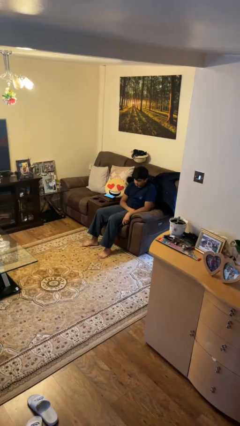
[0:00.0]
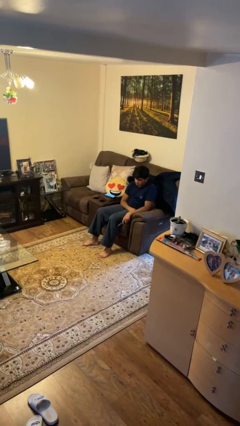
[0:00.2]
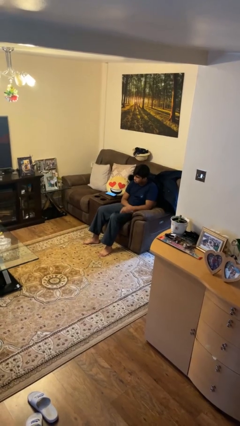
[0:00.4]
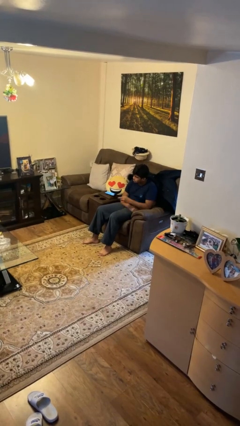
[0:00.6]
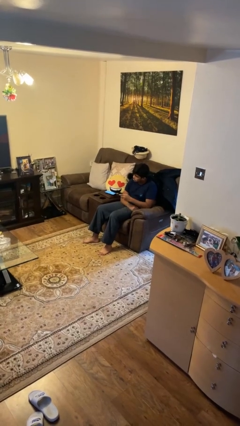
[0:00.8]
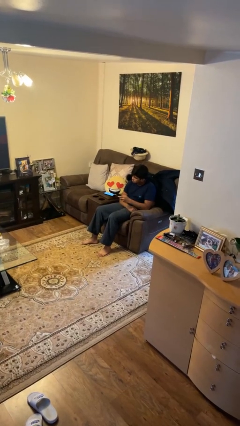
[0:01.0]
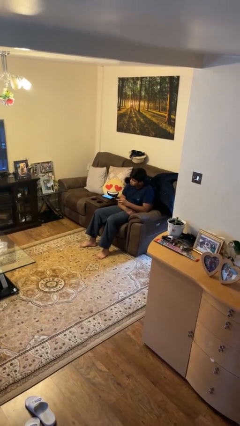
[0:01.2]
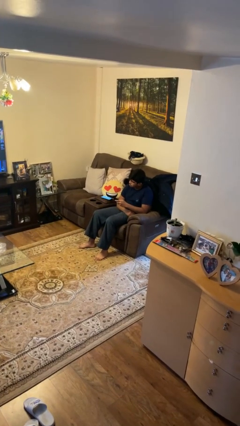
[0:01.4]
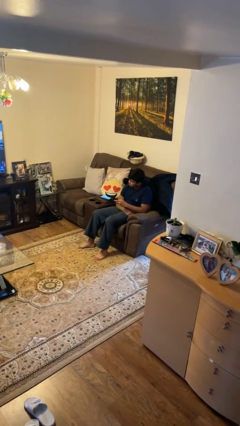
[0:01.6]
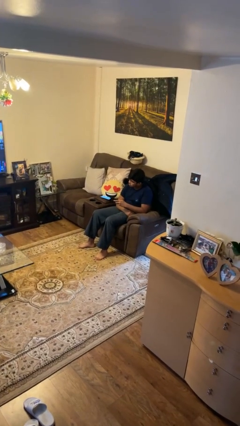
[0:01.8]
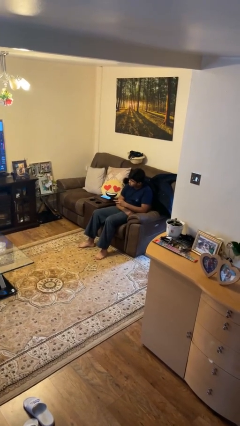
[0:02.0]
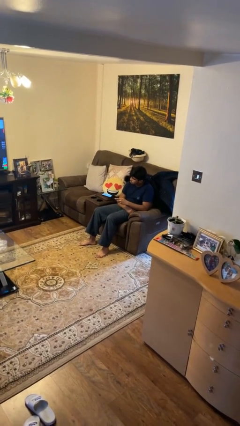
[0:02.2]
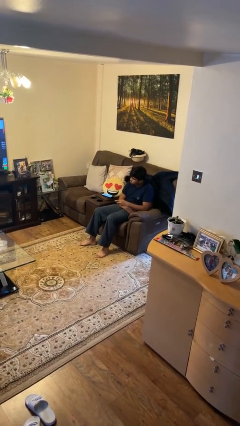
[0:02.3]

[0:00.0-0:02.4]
person uses television remote

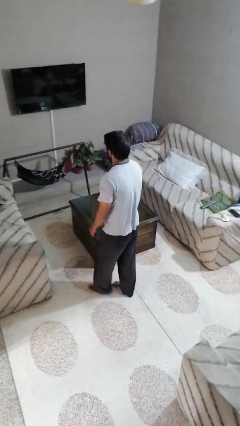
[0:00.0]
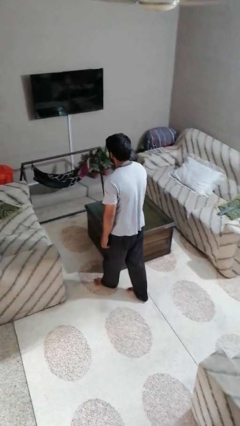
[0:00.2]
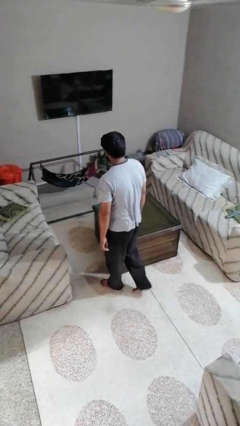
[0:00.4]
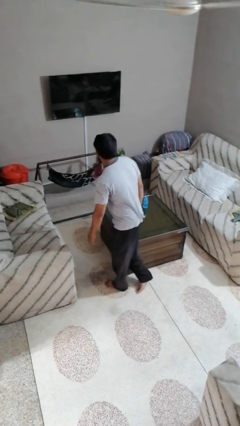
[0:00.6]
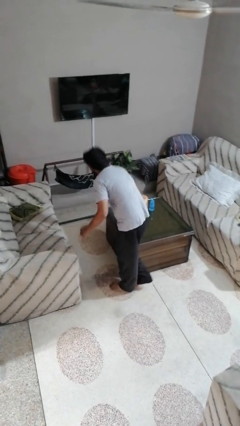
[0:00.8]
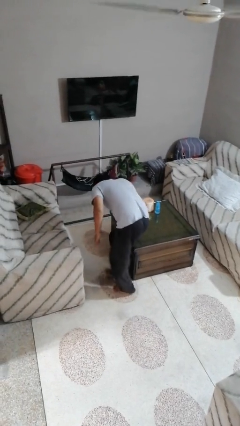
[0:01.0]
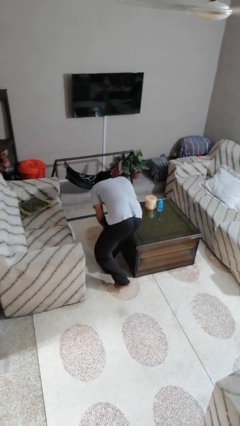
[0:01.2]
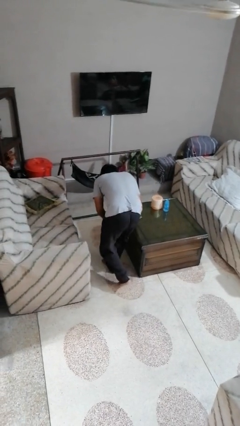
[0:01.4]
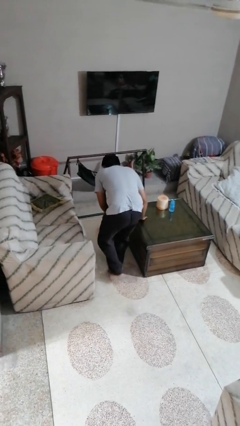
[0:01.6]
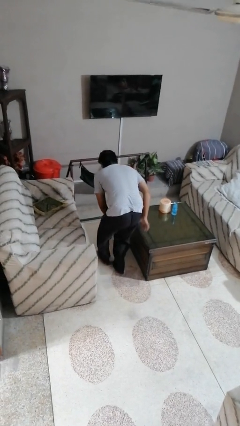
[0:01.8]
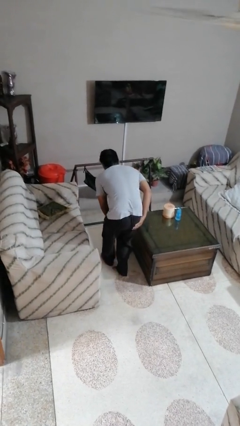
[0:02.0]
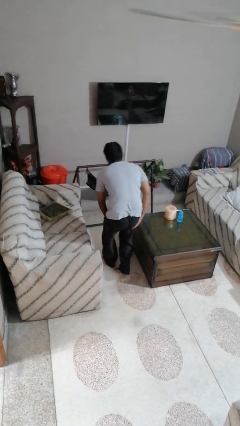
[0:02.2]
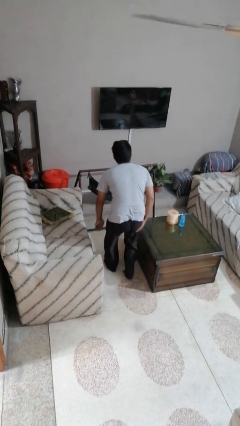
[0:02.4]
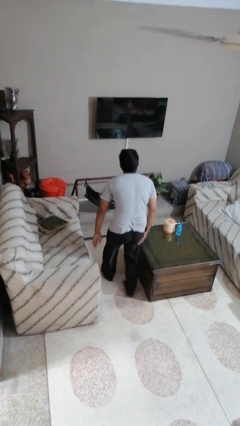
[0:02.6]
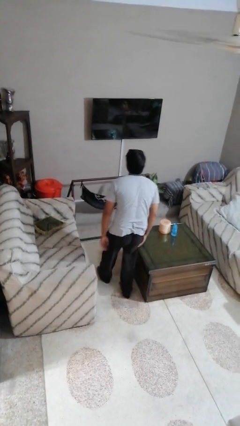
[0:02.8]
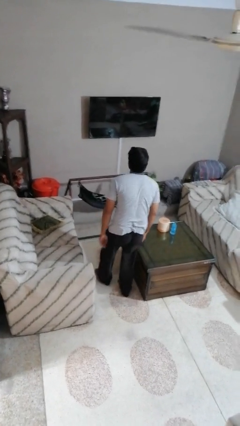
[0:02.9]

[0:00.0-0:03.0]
person bumps into table

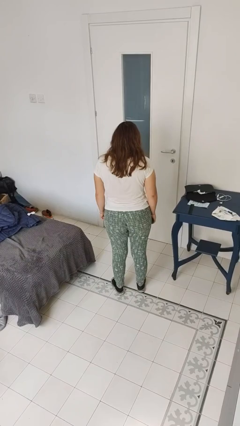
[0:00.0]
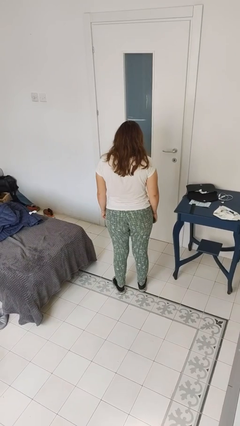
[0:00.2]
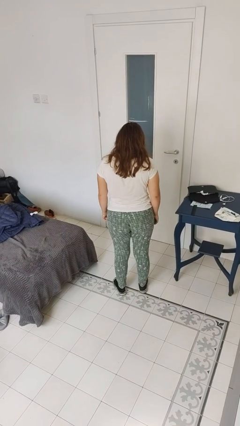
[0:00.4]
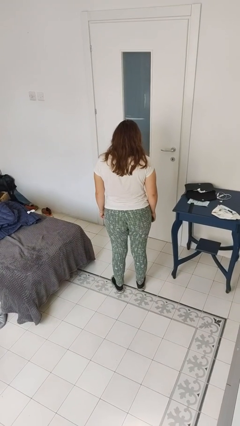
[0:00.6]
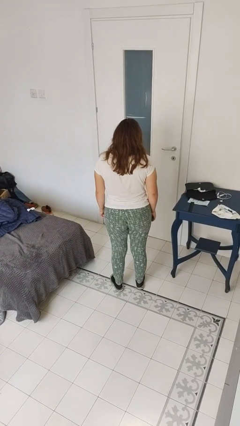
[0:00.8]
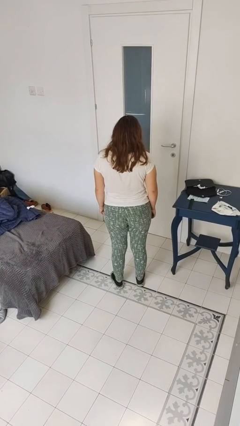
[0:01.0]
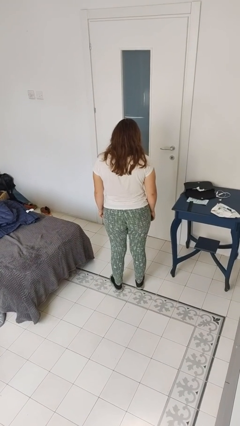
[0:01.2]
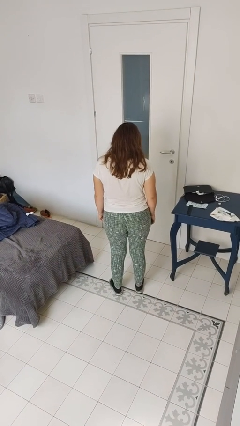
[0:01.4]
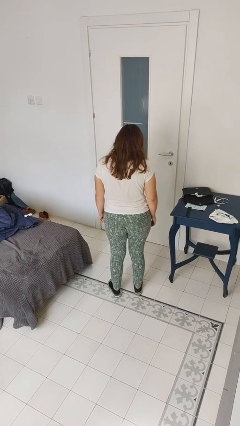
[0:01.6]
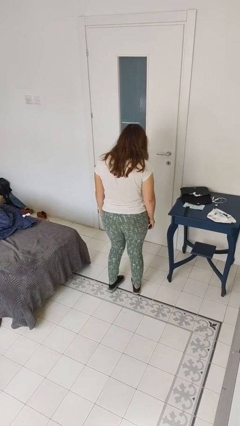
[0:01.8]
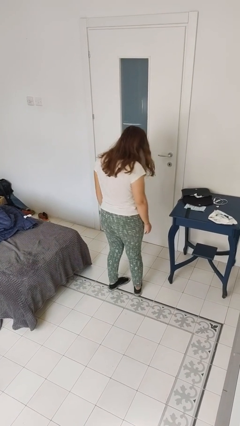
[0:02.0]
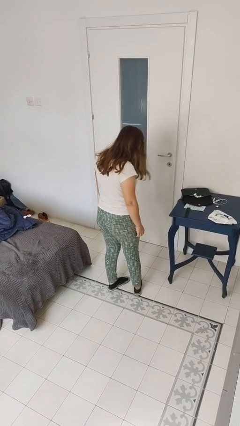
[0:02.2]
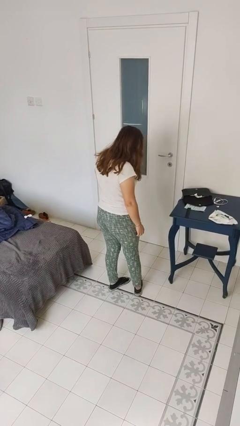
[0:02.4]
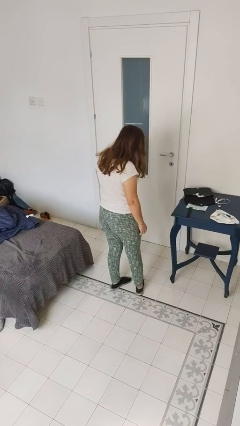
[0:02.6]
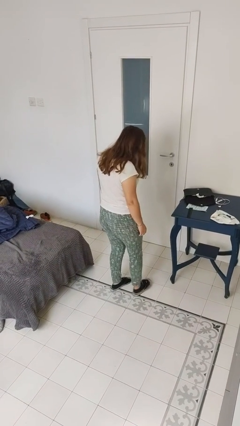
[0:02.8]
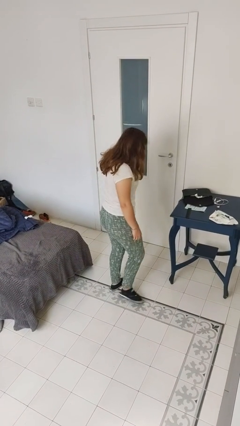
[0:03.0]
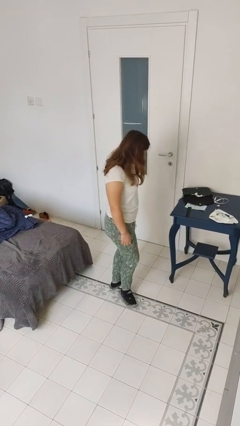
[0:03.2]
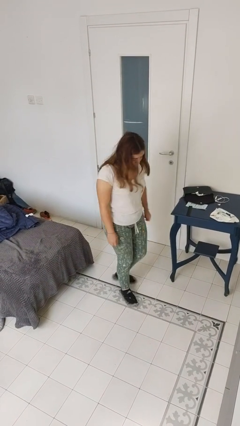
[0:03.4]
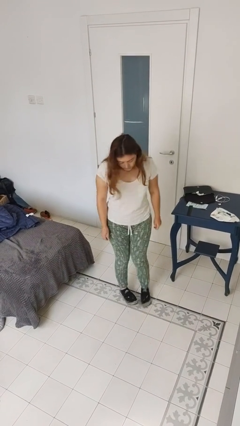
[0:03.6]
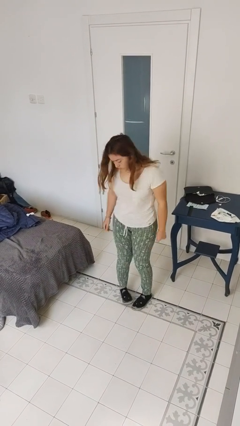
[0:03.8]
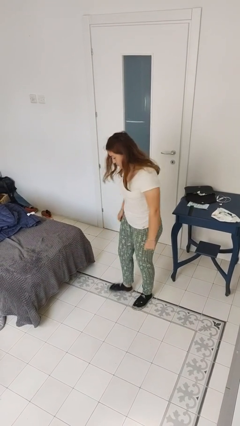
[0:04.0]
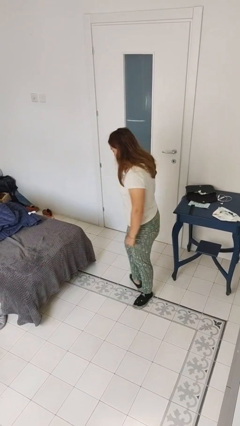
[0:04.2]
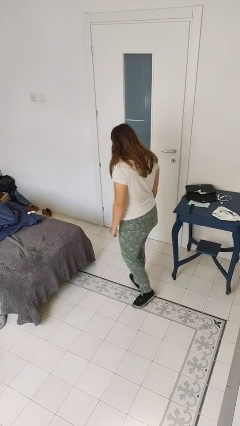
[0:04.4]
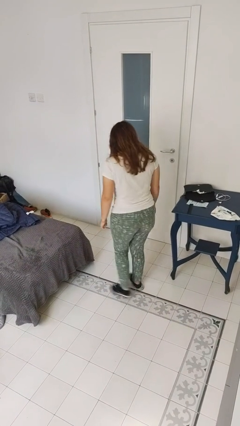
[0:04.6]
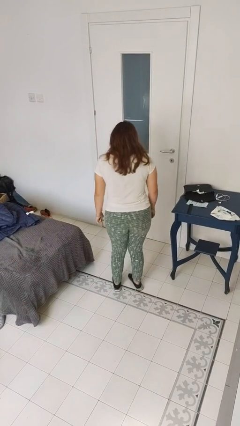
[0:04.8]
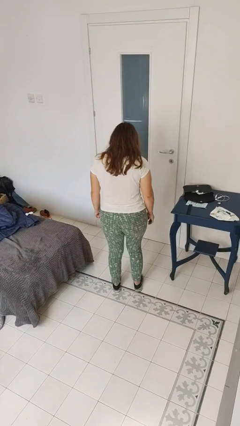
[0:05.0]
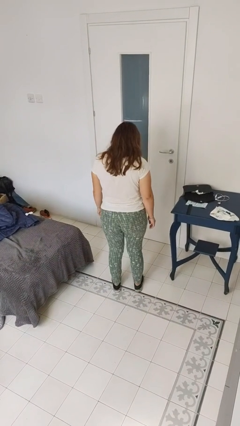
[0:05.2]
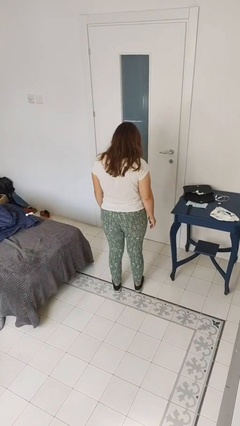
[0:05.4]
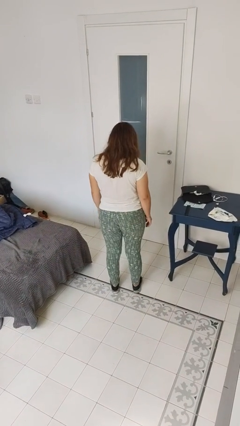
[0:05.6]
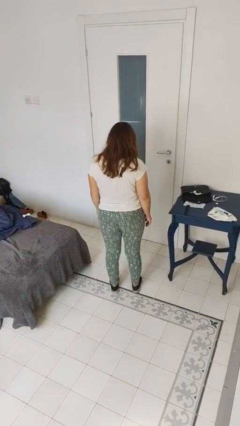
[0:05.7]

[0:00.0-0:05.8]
person twirls

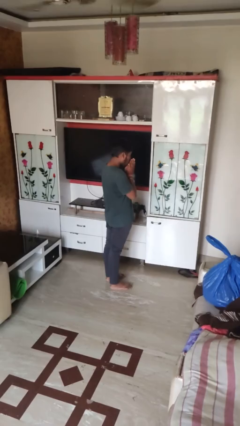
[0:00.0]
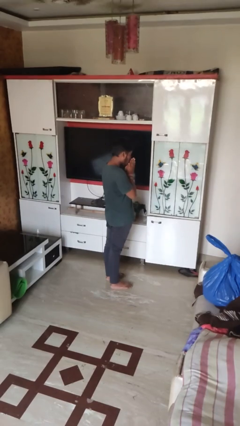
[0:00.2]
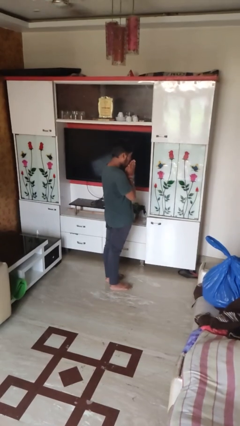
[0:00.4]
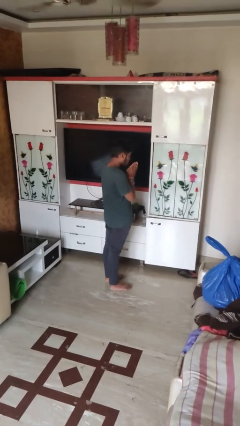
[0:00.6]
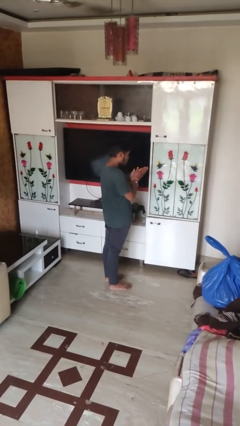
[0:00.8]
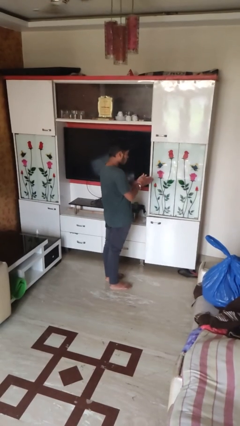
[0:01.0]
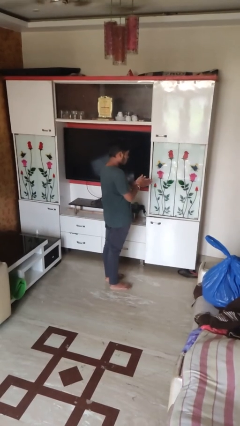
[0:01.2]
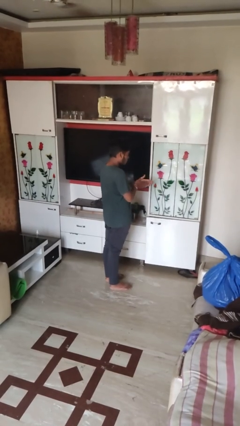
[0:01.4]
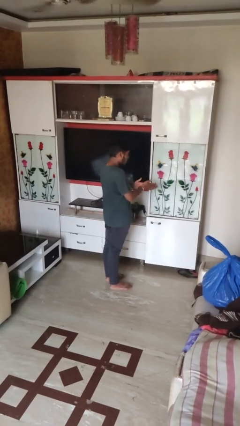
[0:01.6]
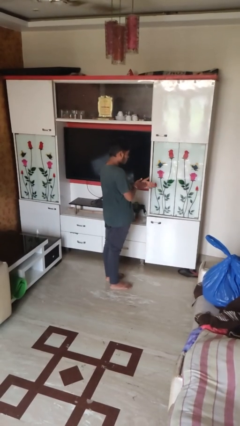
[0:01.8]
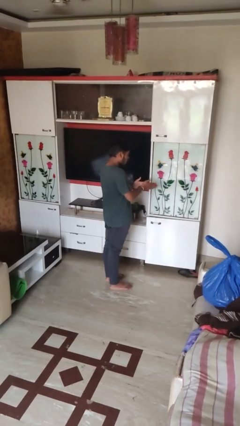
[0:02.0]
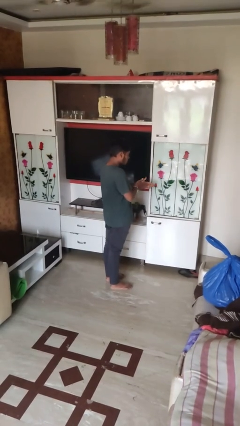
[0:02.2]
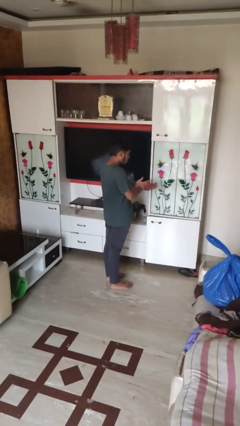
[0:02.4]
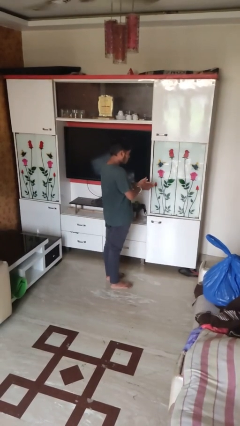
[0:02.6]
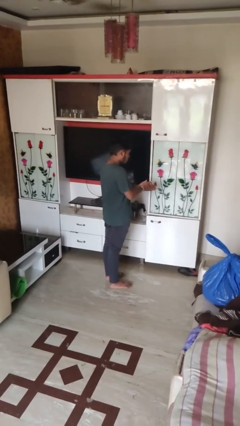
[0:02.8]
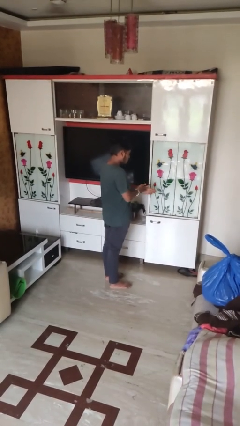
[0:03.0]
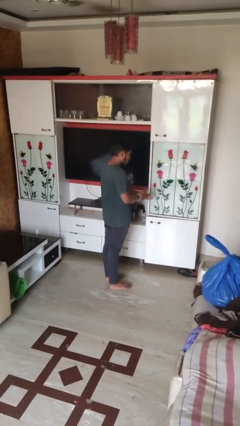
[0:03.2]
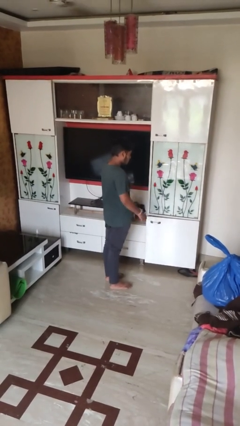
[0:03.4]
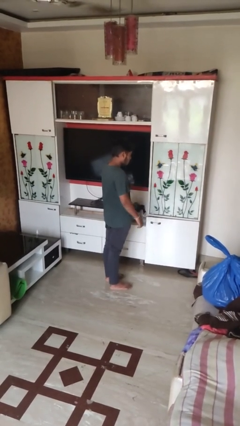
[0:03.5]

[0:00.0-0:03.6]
person blows into hands

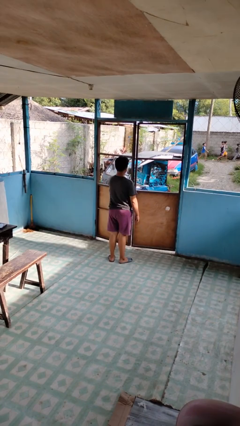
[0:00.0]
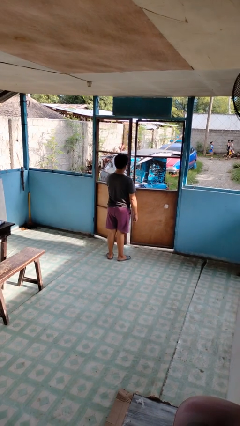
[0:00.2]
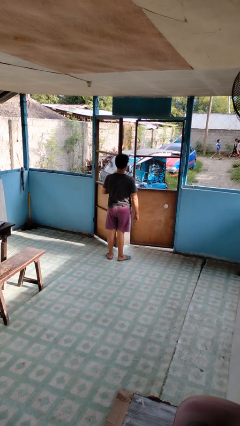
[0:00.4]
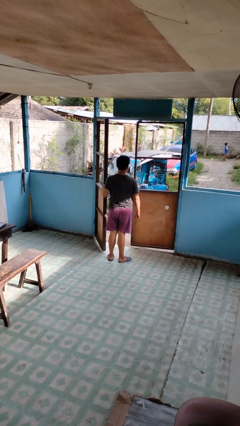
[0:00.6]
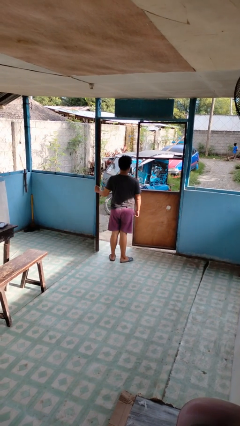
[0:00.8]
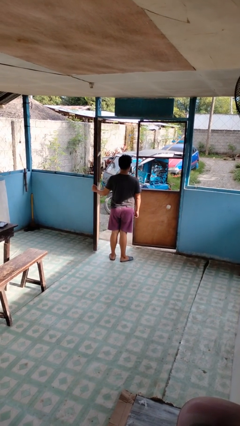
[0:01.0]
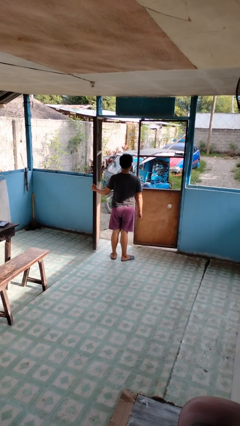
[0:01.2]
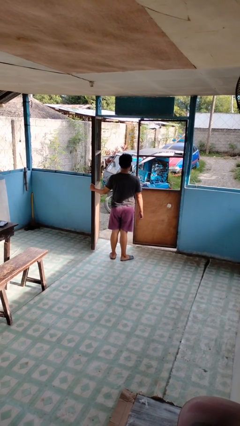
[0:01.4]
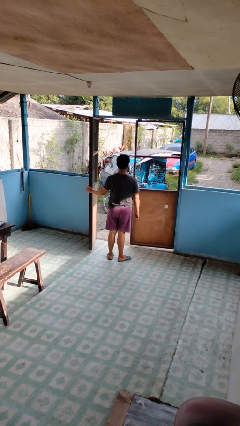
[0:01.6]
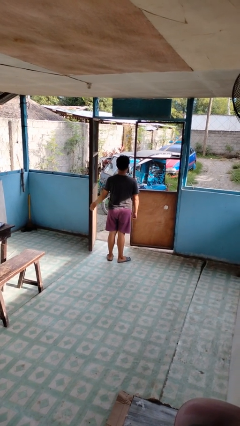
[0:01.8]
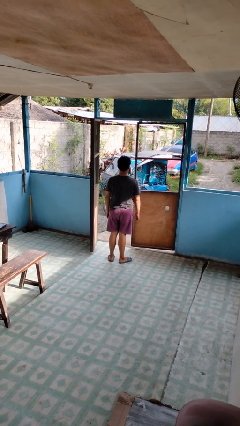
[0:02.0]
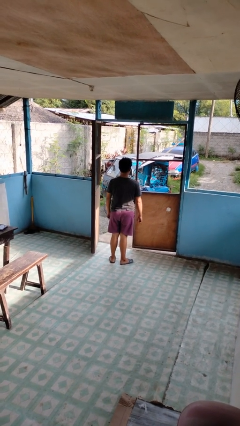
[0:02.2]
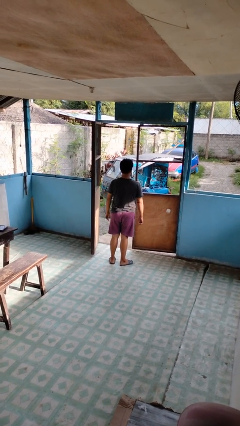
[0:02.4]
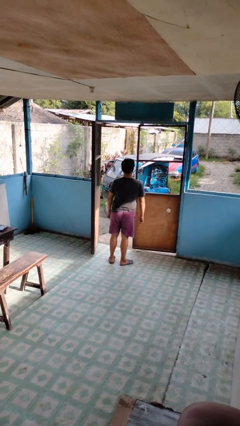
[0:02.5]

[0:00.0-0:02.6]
person opens facility door

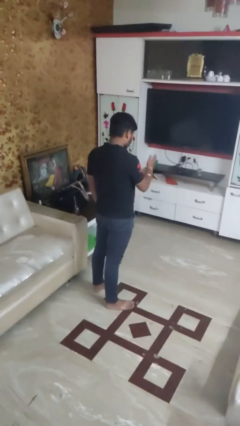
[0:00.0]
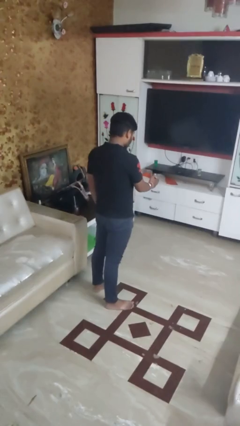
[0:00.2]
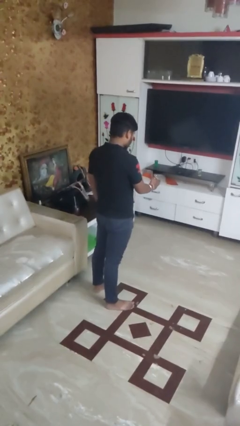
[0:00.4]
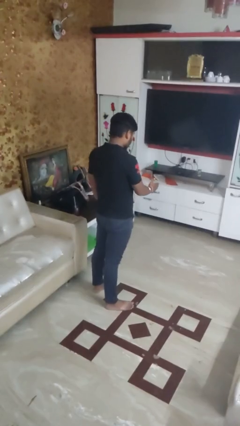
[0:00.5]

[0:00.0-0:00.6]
person karate chop
